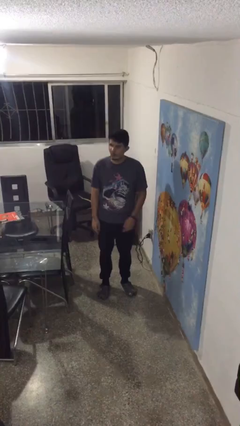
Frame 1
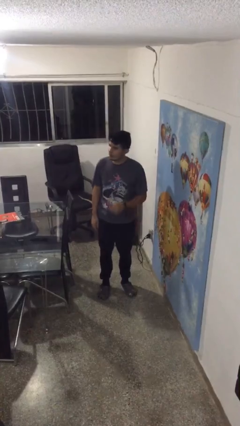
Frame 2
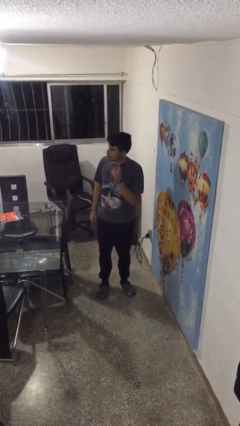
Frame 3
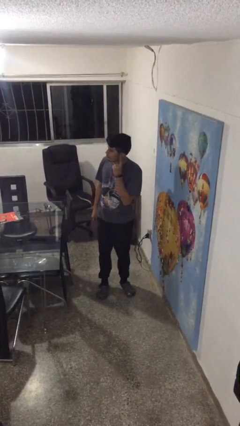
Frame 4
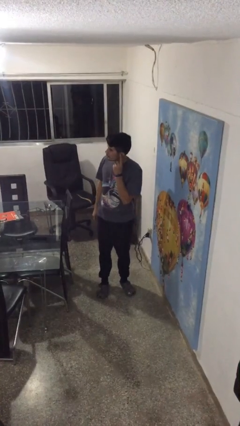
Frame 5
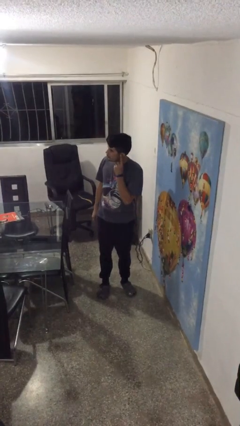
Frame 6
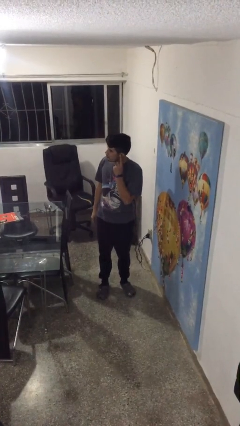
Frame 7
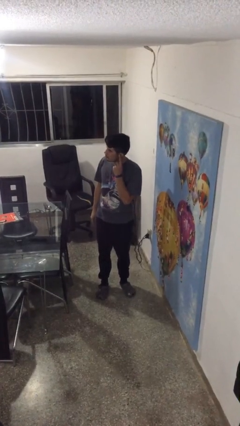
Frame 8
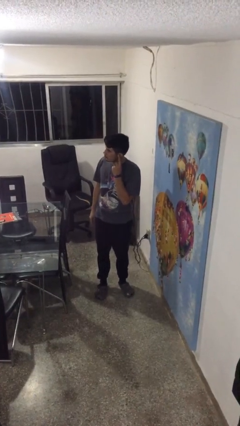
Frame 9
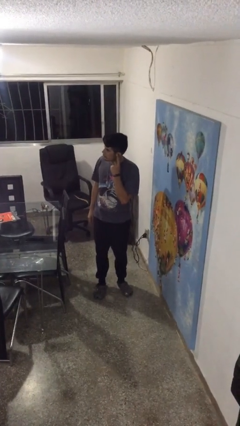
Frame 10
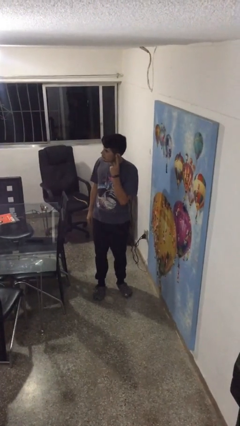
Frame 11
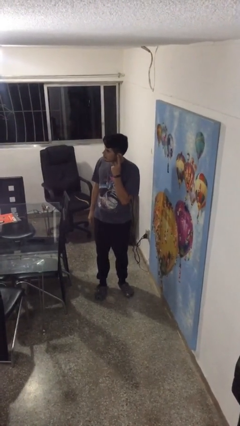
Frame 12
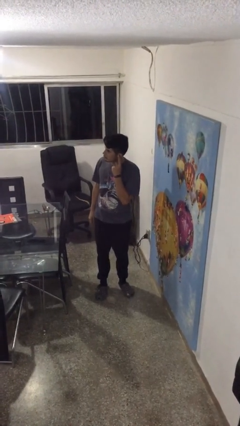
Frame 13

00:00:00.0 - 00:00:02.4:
person gestures listen closely

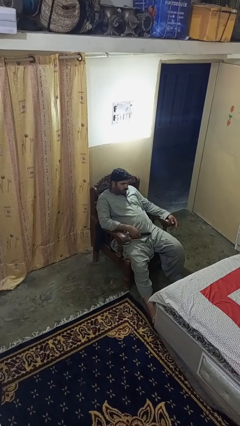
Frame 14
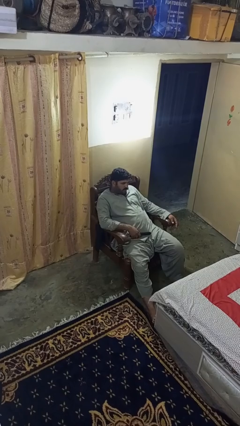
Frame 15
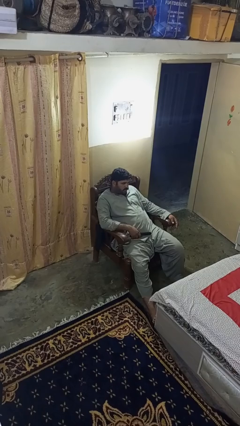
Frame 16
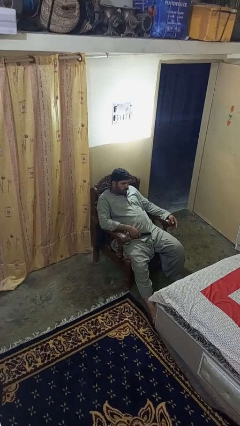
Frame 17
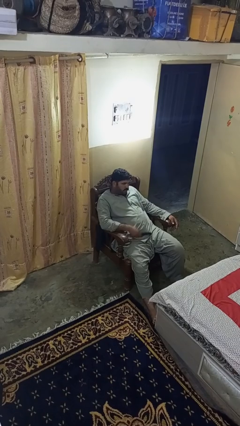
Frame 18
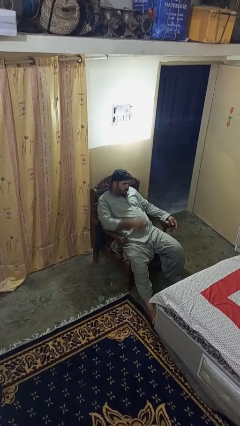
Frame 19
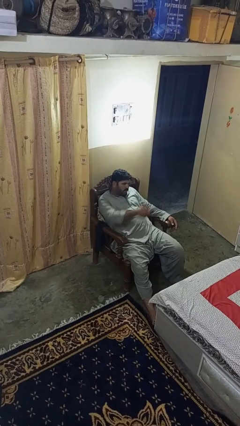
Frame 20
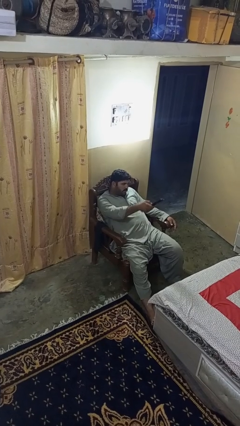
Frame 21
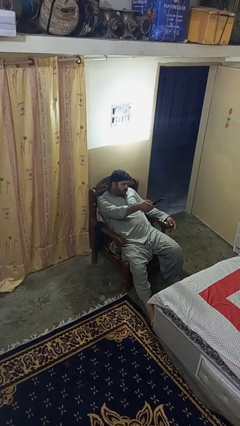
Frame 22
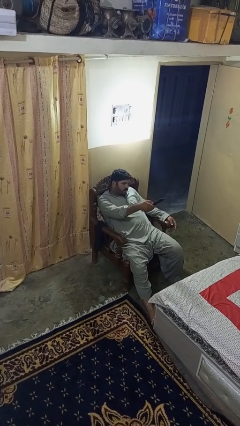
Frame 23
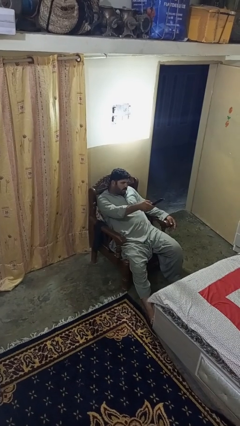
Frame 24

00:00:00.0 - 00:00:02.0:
person uses television remote

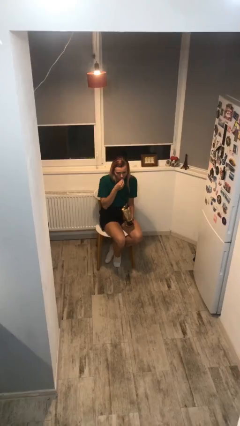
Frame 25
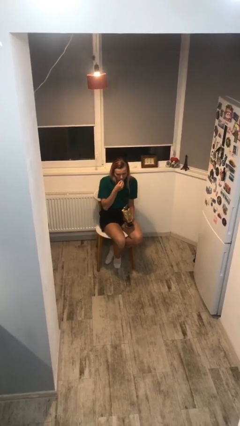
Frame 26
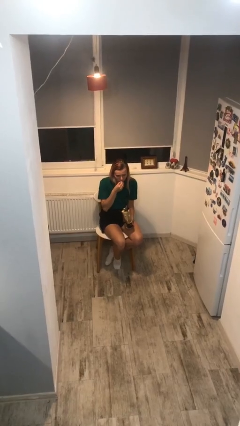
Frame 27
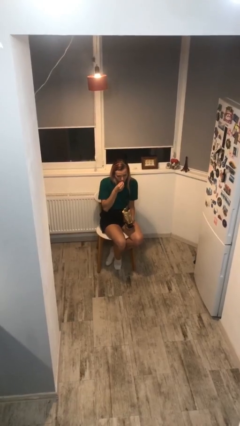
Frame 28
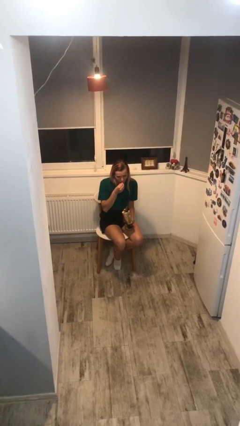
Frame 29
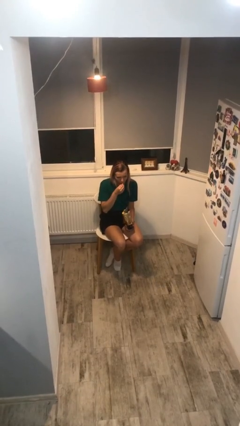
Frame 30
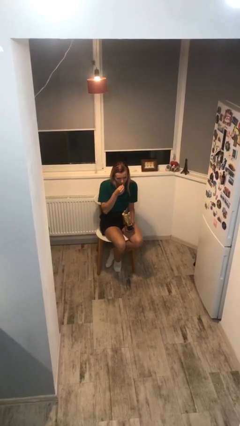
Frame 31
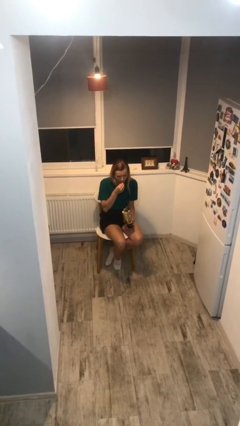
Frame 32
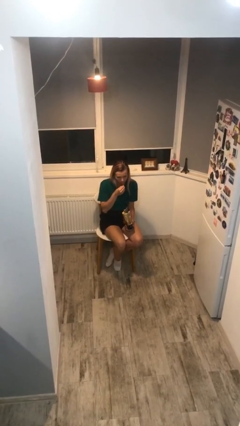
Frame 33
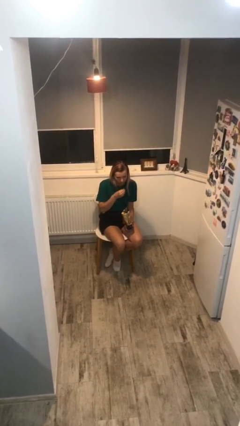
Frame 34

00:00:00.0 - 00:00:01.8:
person eats snack from bag

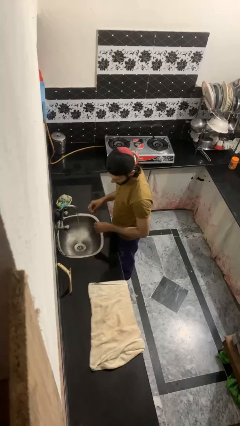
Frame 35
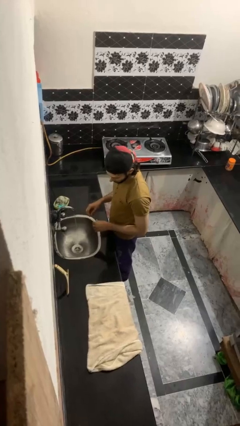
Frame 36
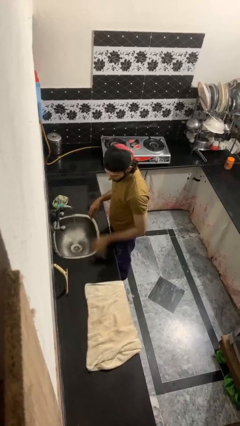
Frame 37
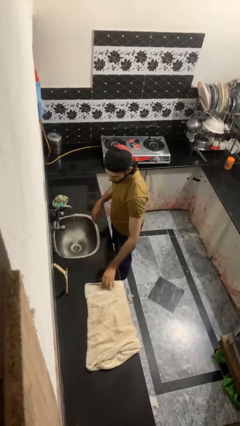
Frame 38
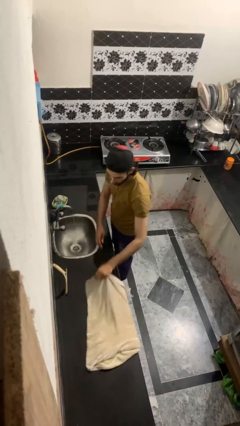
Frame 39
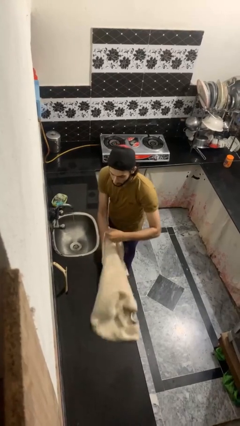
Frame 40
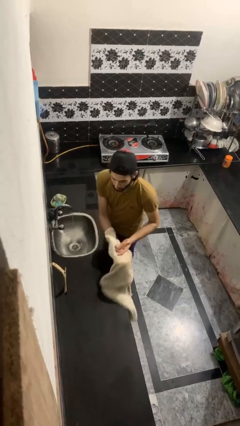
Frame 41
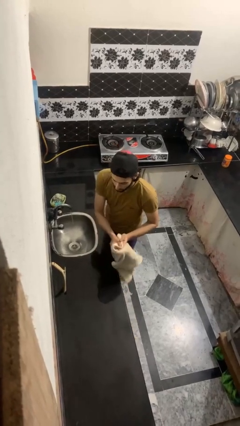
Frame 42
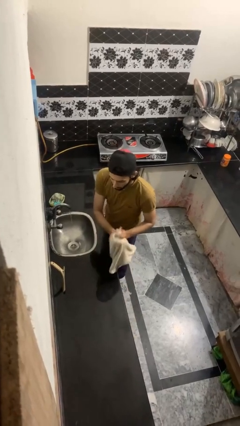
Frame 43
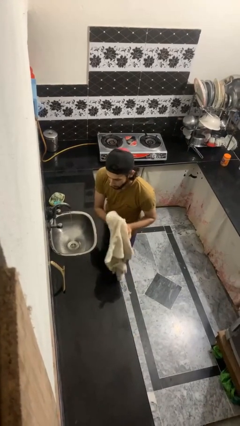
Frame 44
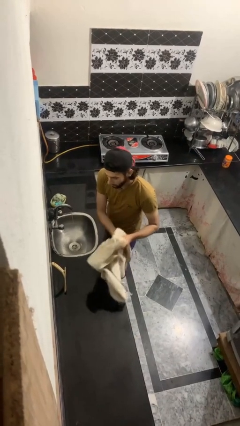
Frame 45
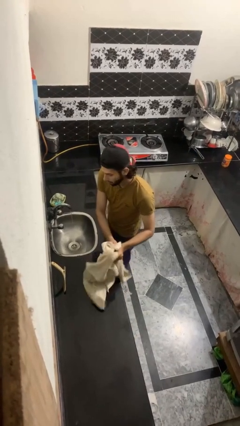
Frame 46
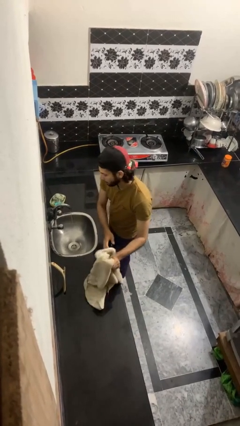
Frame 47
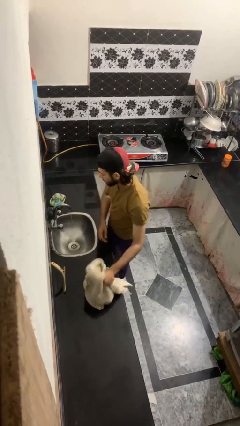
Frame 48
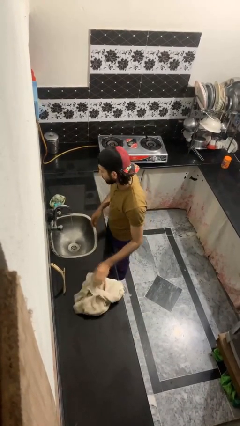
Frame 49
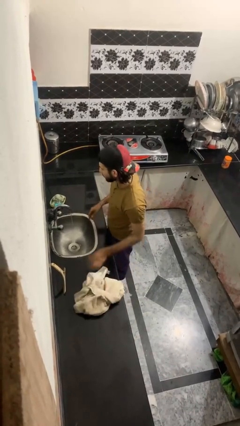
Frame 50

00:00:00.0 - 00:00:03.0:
person dries hands with towel

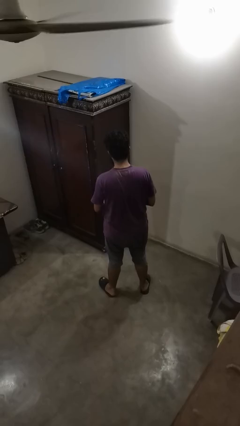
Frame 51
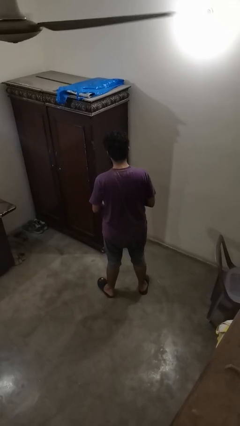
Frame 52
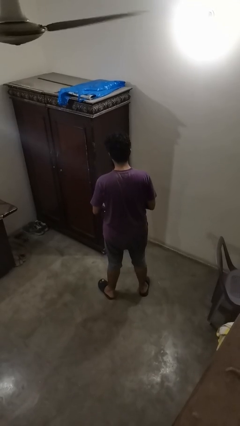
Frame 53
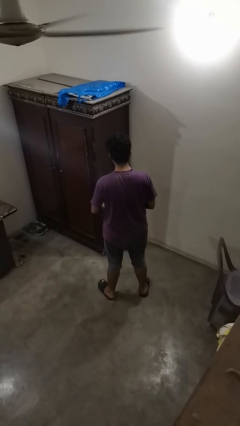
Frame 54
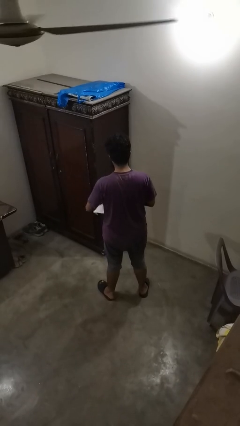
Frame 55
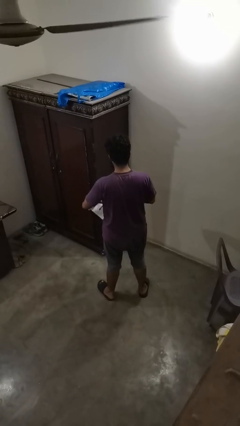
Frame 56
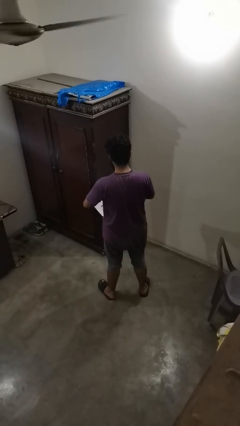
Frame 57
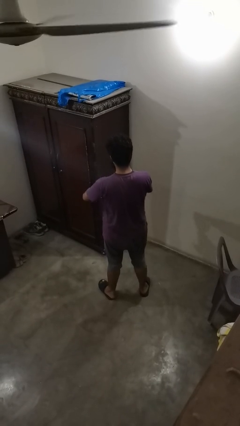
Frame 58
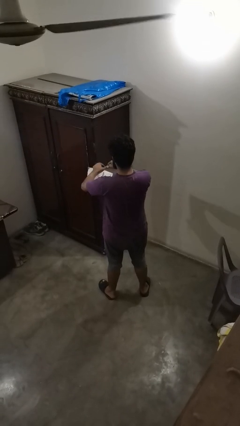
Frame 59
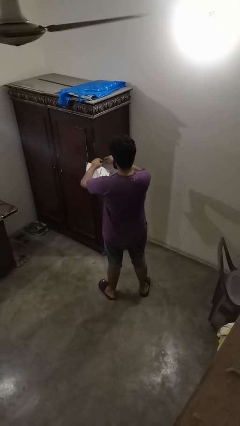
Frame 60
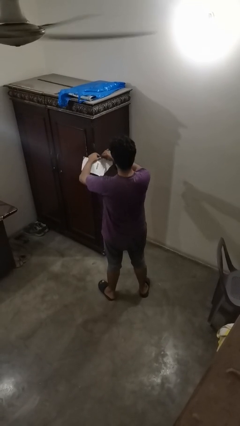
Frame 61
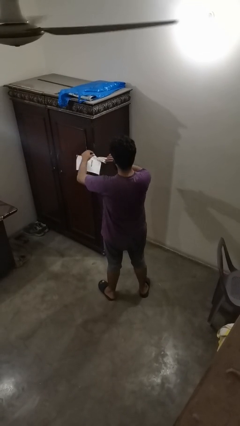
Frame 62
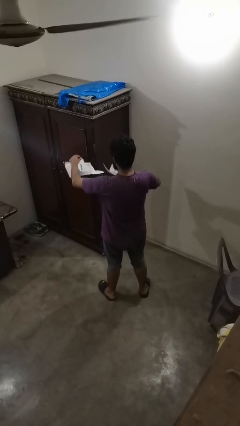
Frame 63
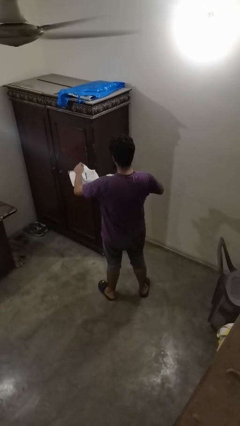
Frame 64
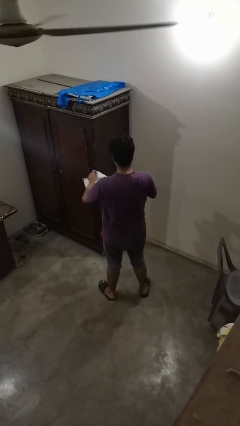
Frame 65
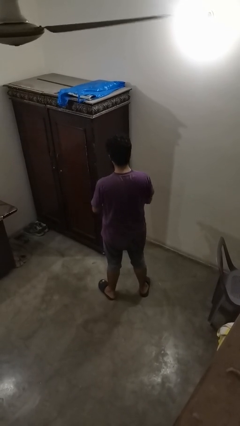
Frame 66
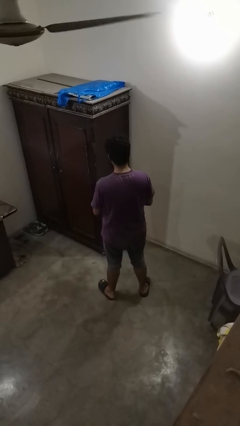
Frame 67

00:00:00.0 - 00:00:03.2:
person tears paper

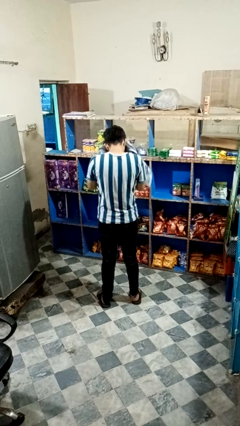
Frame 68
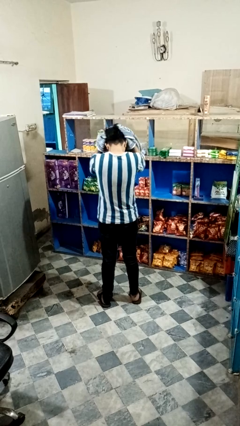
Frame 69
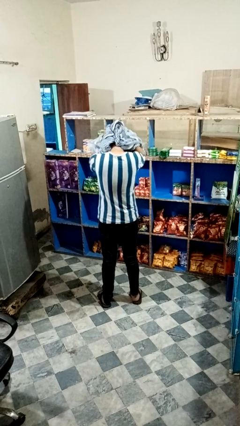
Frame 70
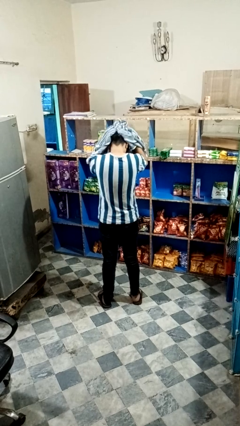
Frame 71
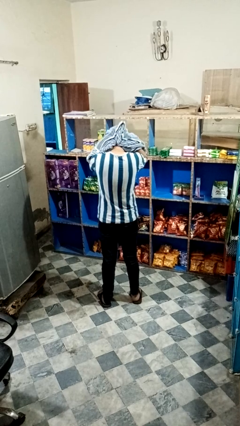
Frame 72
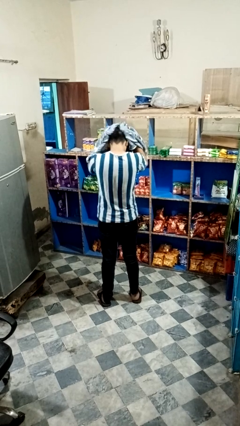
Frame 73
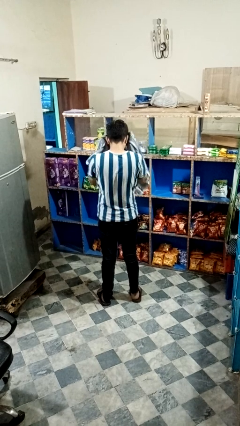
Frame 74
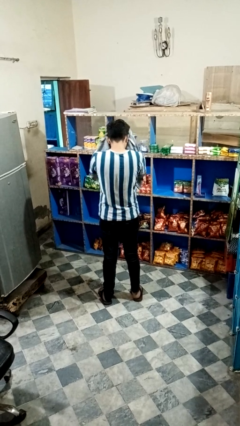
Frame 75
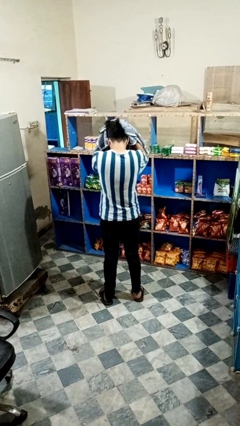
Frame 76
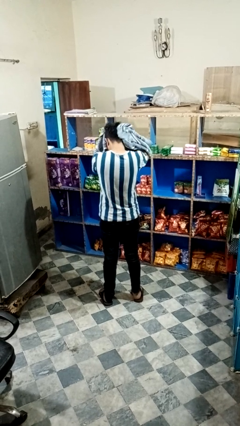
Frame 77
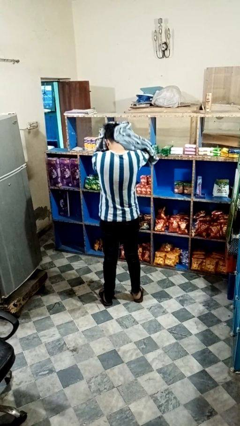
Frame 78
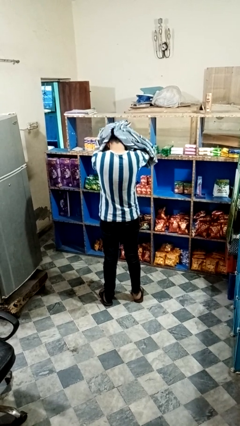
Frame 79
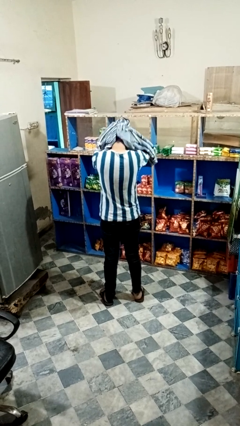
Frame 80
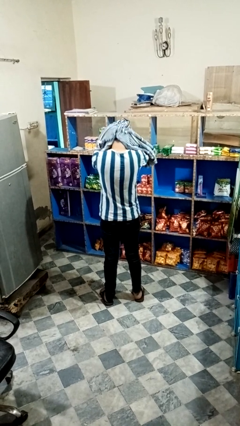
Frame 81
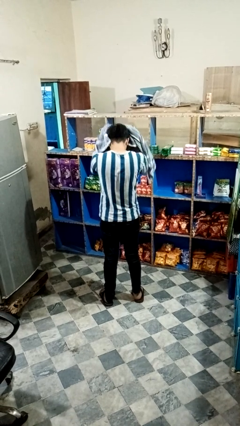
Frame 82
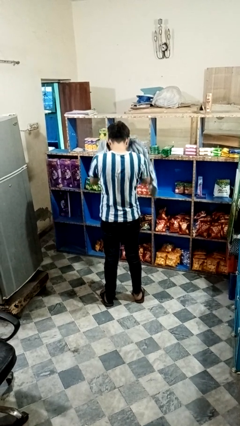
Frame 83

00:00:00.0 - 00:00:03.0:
person dries hair with towel

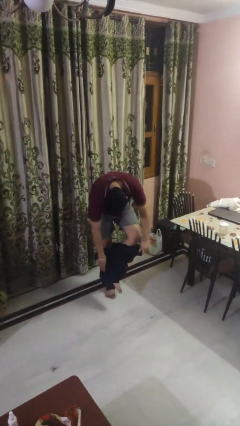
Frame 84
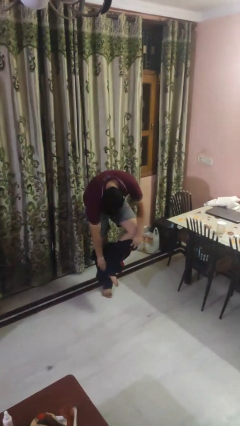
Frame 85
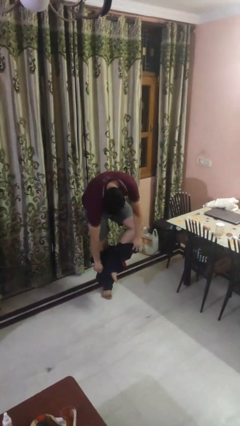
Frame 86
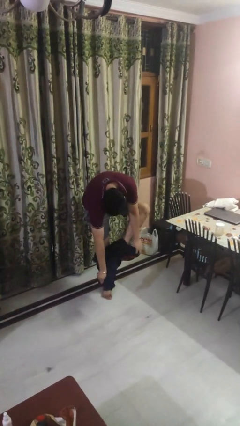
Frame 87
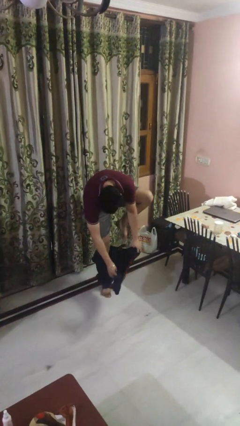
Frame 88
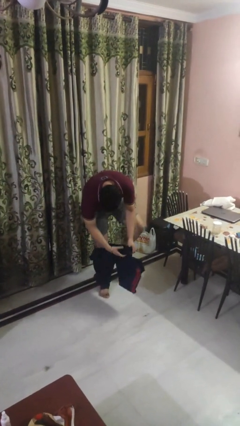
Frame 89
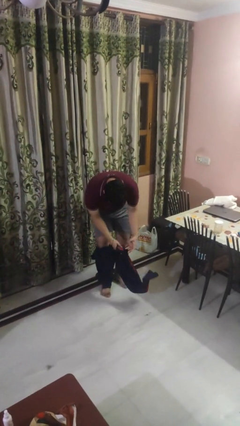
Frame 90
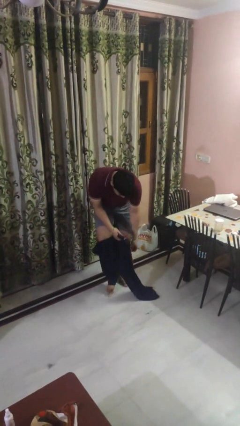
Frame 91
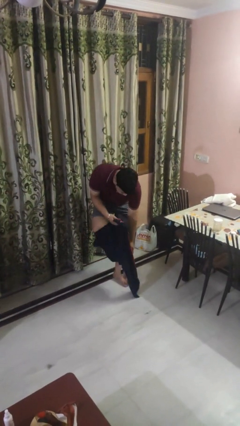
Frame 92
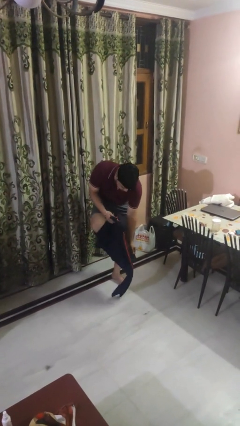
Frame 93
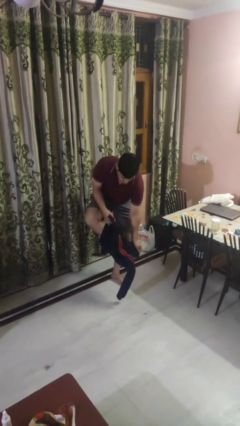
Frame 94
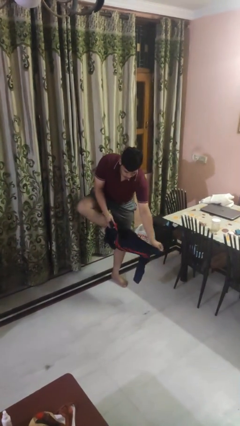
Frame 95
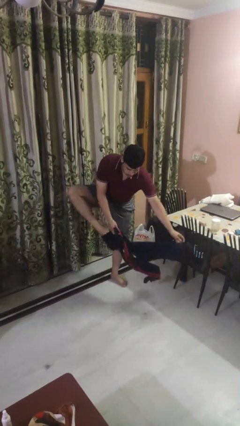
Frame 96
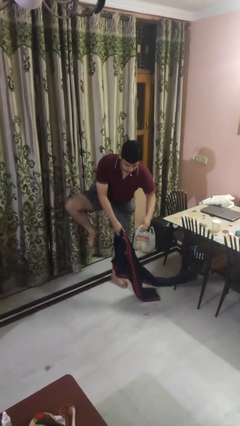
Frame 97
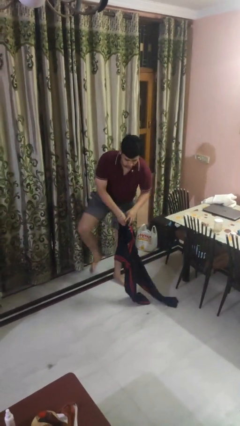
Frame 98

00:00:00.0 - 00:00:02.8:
person takes off pants
